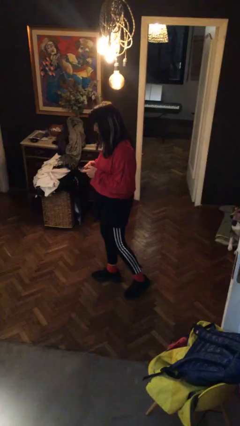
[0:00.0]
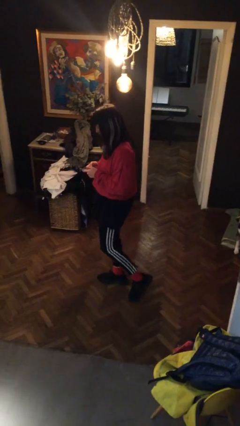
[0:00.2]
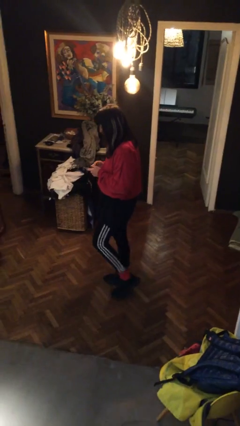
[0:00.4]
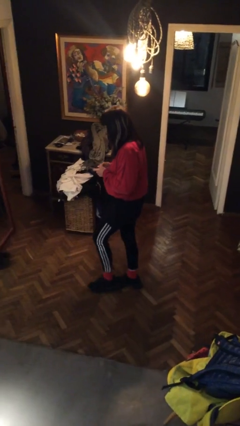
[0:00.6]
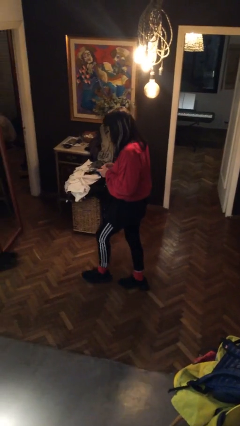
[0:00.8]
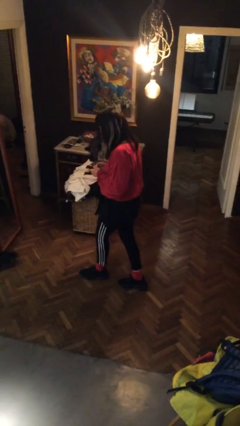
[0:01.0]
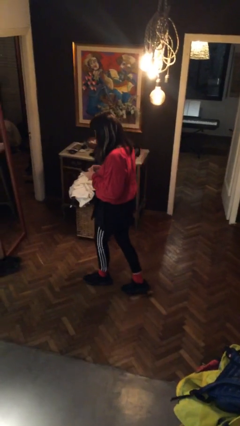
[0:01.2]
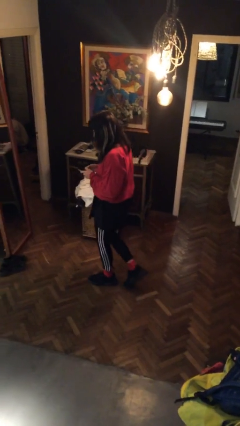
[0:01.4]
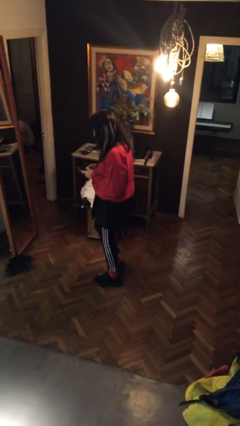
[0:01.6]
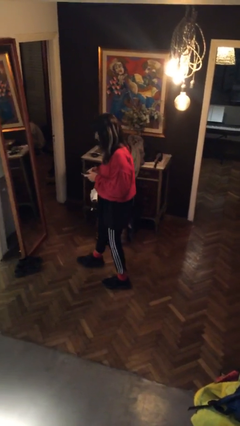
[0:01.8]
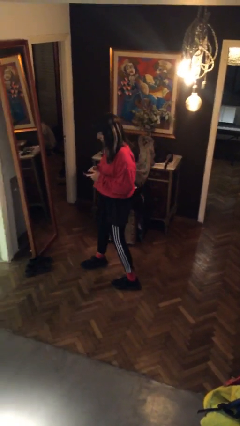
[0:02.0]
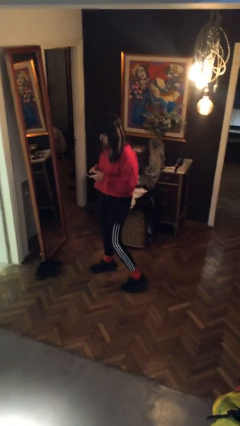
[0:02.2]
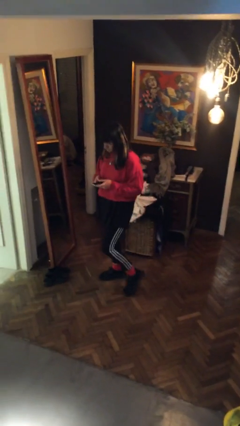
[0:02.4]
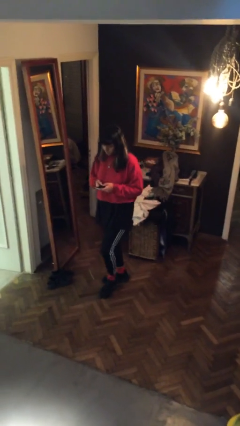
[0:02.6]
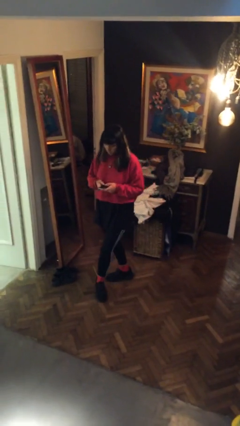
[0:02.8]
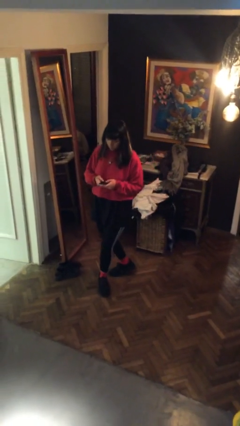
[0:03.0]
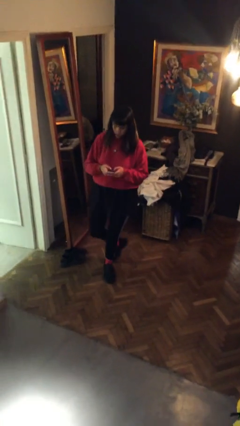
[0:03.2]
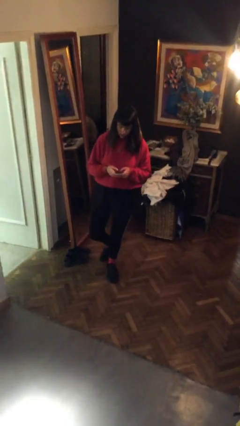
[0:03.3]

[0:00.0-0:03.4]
person texts on phone

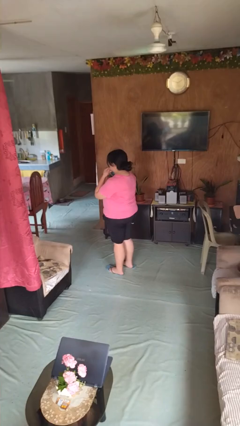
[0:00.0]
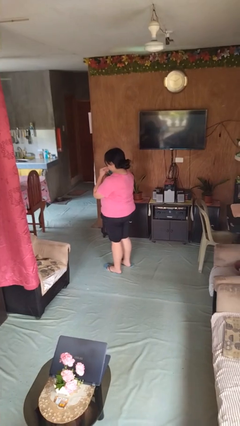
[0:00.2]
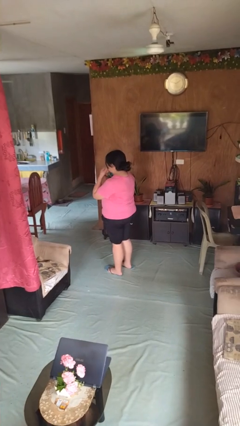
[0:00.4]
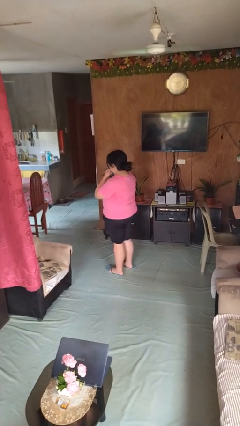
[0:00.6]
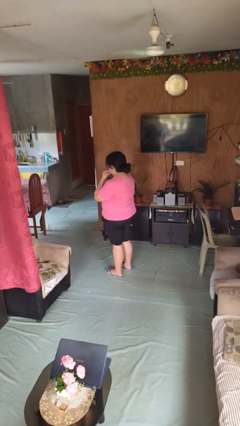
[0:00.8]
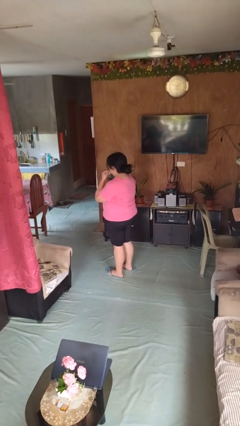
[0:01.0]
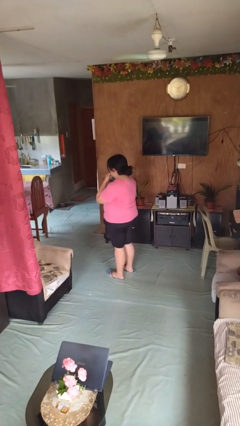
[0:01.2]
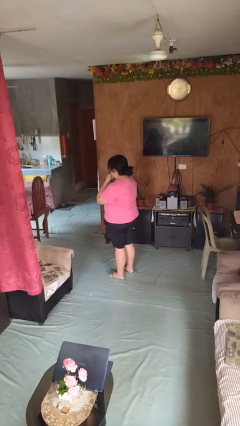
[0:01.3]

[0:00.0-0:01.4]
person strokes chin

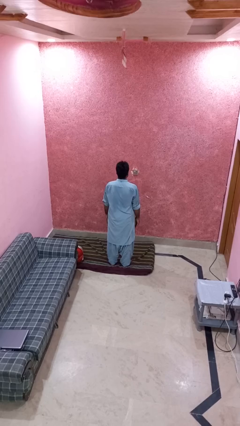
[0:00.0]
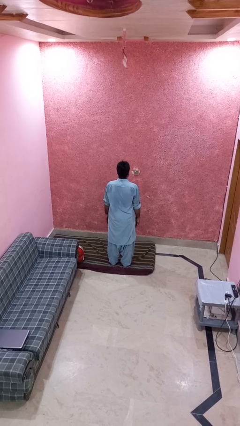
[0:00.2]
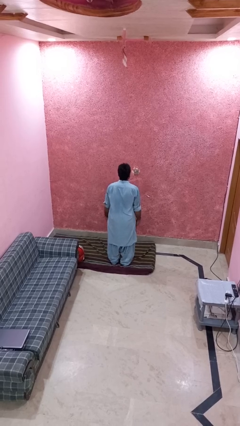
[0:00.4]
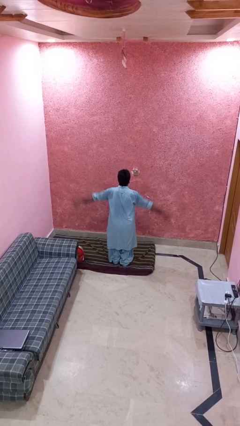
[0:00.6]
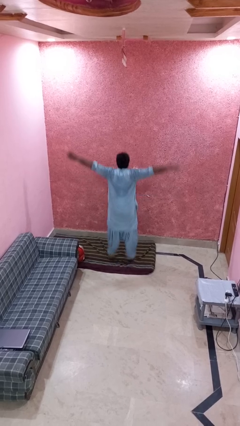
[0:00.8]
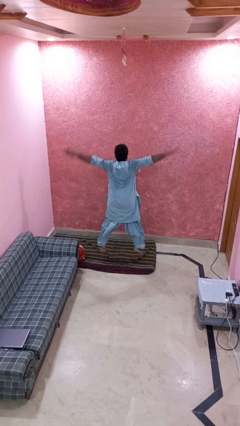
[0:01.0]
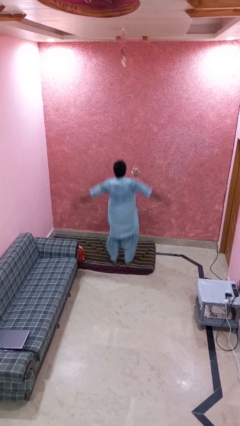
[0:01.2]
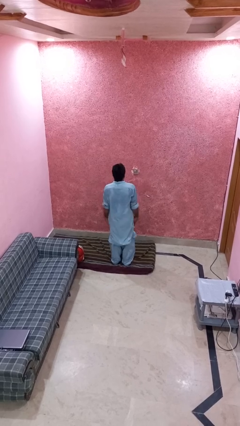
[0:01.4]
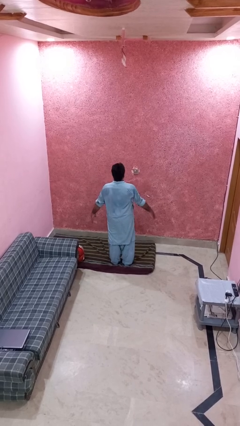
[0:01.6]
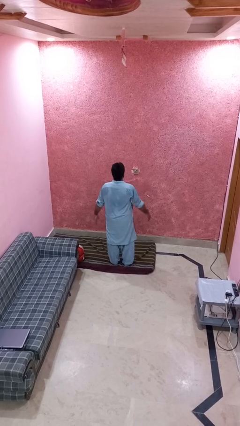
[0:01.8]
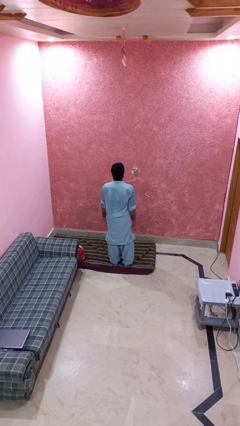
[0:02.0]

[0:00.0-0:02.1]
person exercises with jumping jacks

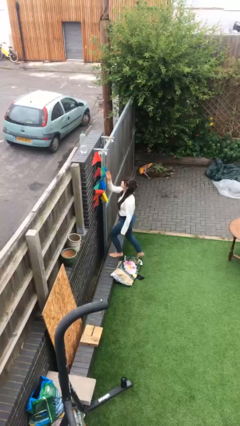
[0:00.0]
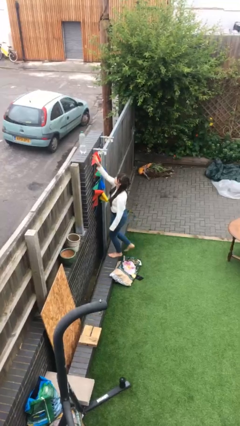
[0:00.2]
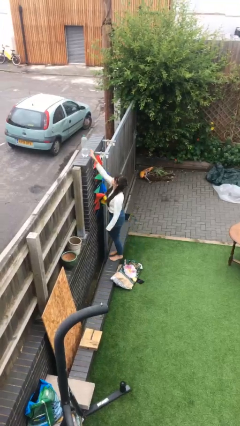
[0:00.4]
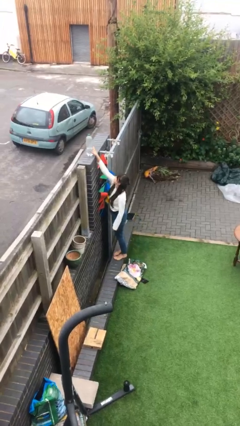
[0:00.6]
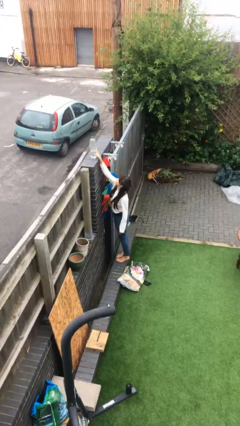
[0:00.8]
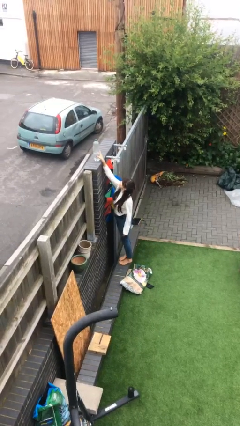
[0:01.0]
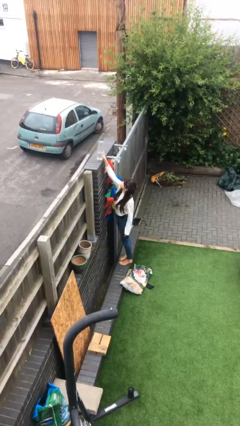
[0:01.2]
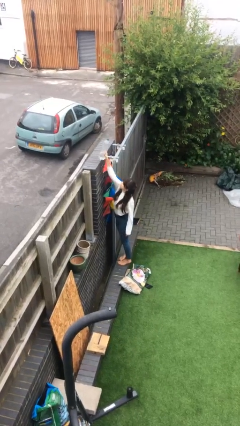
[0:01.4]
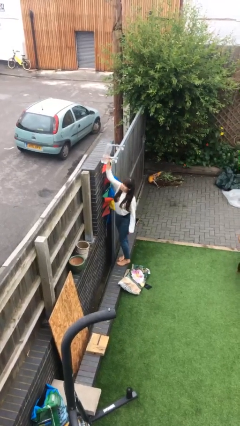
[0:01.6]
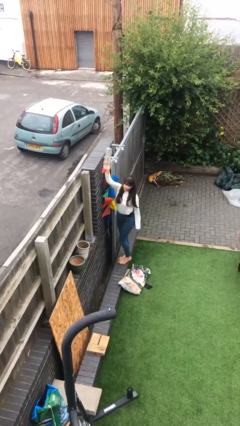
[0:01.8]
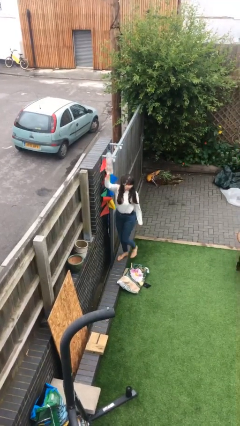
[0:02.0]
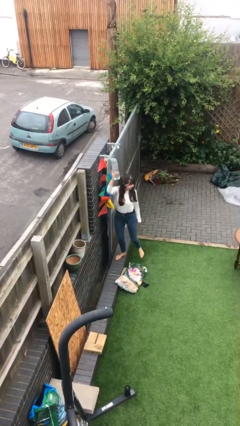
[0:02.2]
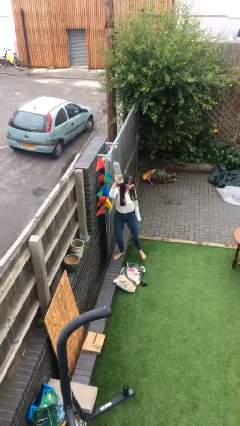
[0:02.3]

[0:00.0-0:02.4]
person picks up object from shelf

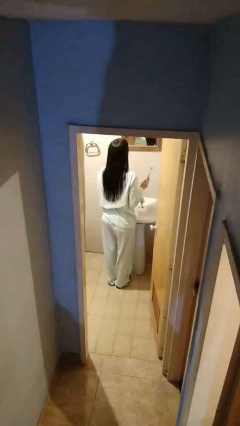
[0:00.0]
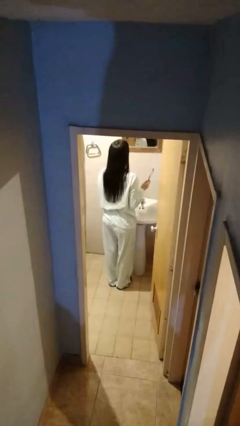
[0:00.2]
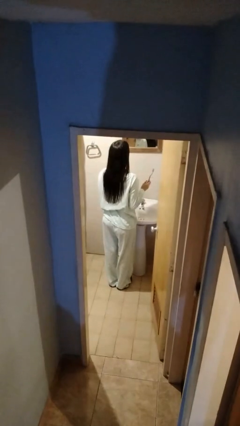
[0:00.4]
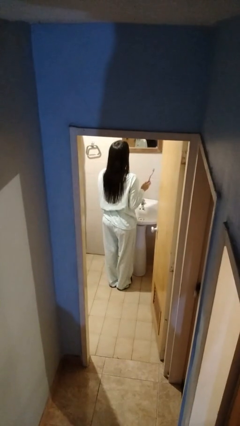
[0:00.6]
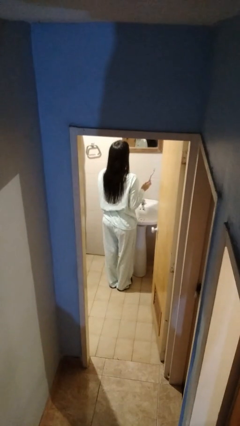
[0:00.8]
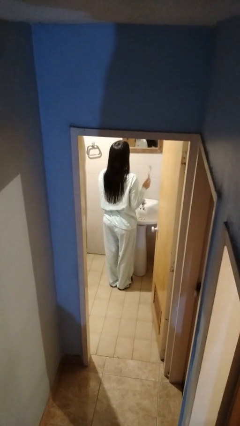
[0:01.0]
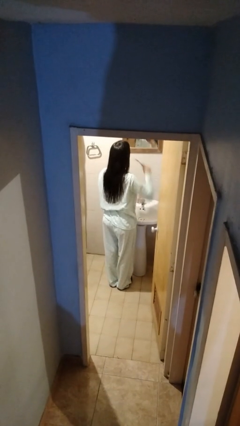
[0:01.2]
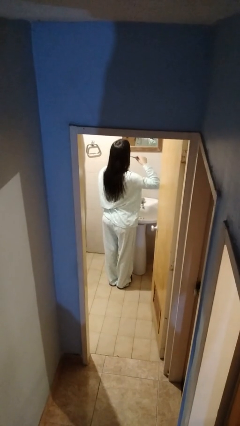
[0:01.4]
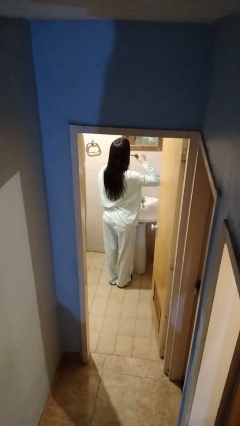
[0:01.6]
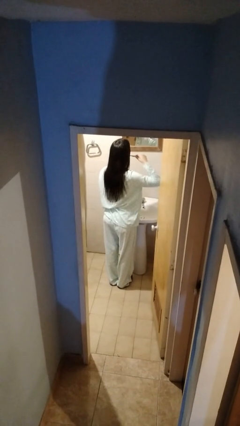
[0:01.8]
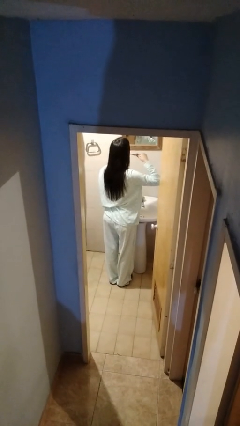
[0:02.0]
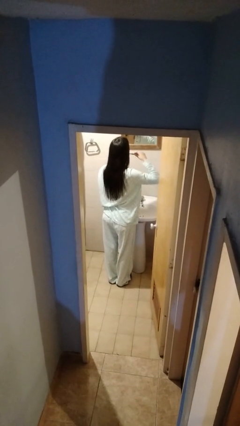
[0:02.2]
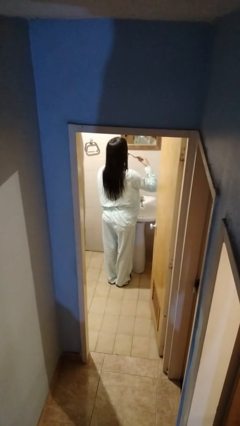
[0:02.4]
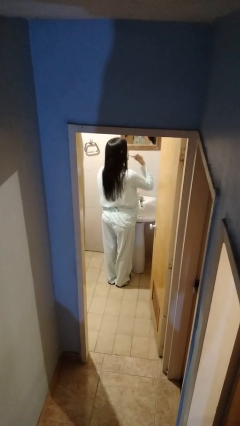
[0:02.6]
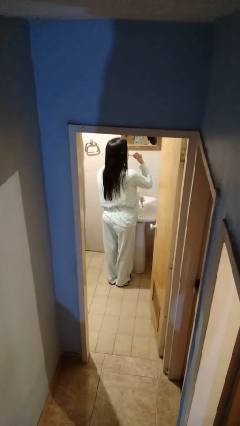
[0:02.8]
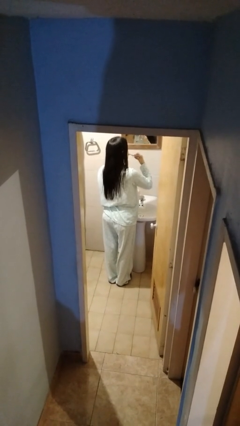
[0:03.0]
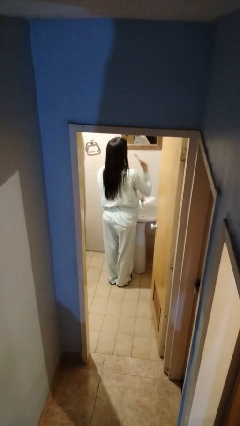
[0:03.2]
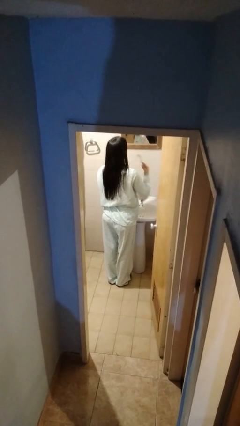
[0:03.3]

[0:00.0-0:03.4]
person brushes teeth

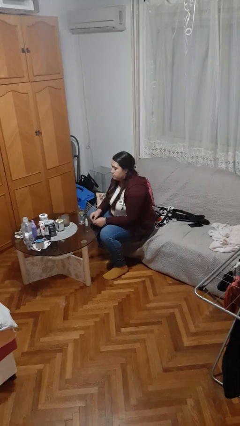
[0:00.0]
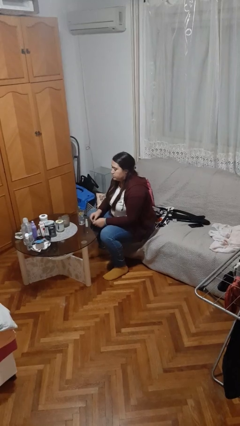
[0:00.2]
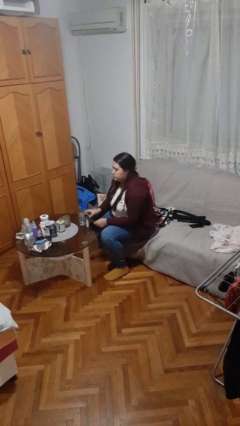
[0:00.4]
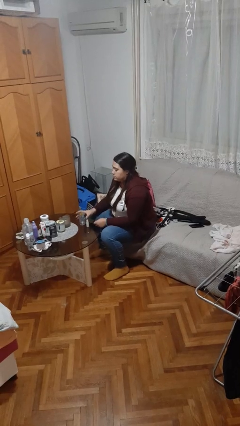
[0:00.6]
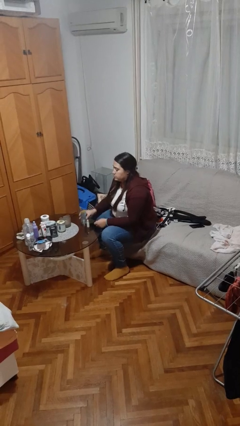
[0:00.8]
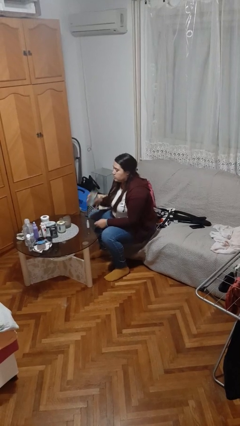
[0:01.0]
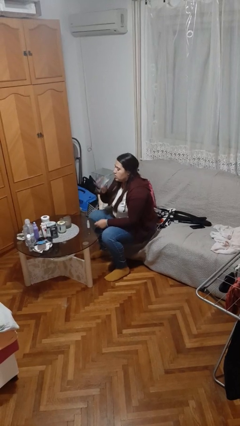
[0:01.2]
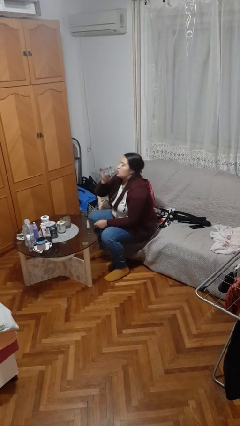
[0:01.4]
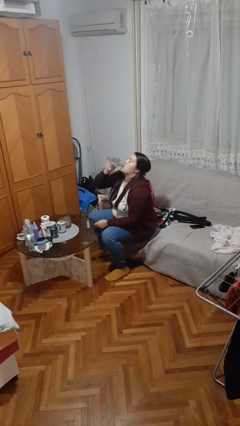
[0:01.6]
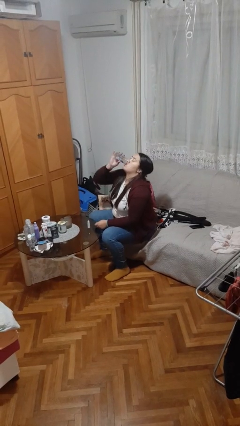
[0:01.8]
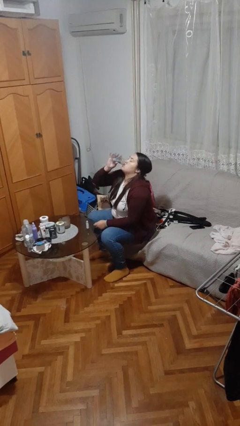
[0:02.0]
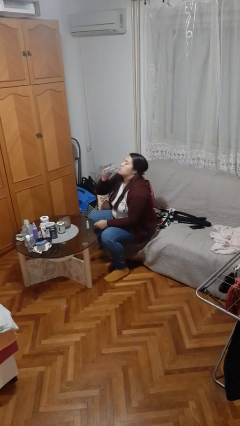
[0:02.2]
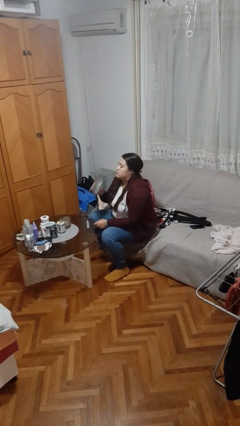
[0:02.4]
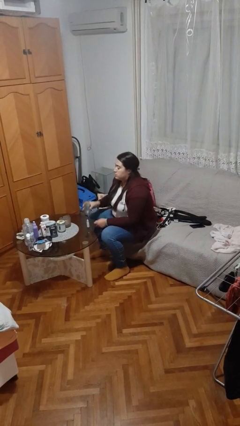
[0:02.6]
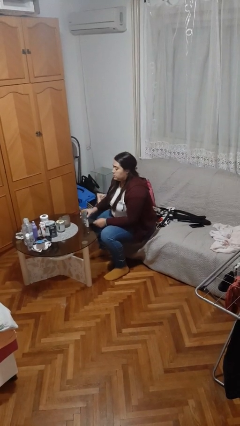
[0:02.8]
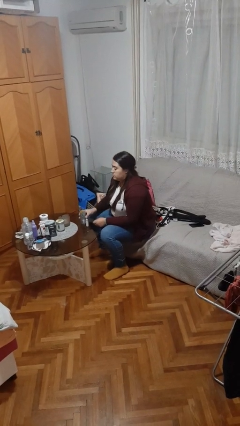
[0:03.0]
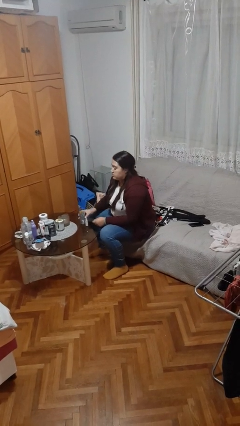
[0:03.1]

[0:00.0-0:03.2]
person drinks from cup

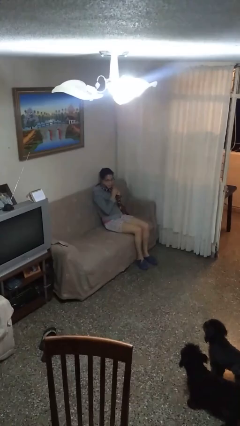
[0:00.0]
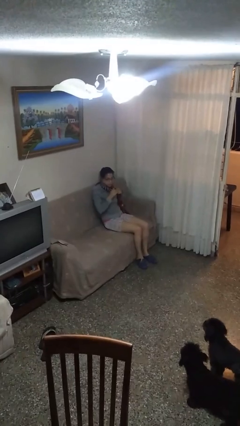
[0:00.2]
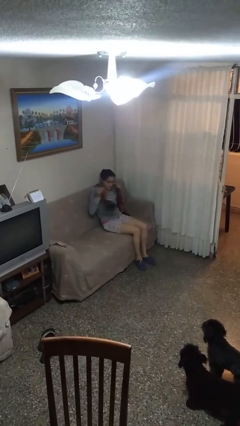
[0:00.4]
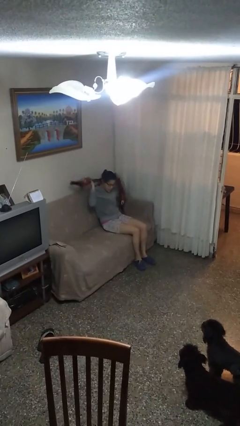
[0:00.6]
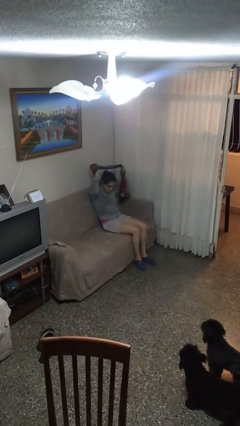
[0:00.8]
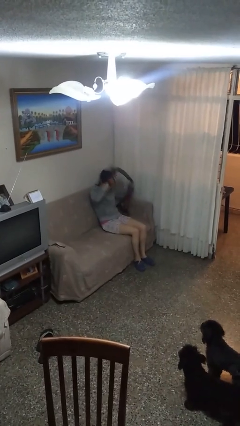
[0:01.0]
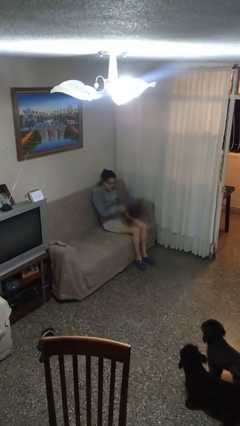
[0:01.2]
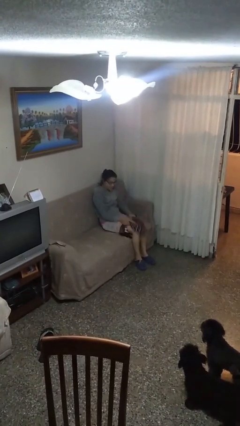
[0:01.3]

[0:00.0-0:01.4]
person takes off scarf
